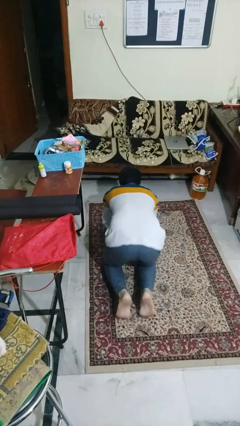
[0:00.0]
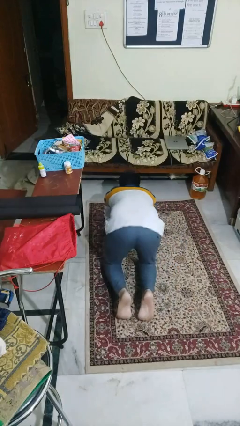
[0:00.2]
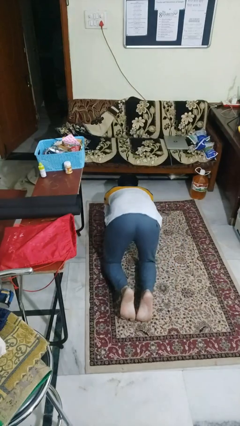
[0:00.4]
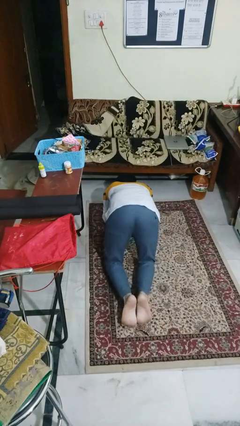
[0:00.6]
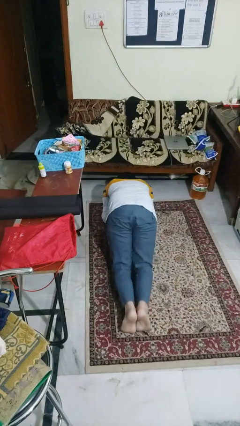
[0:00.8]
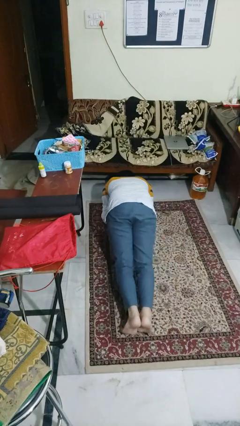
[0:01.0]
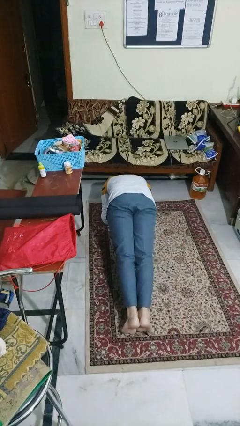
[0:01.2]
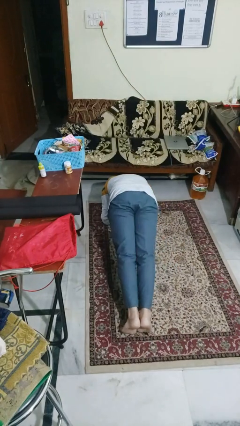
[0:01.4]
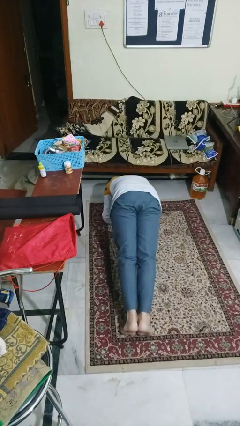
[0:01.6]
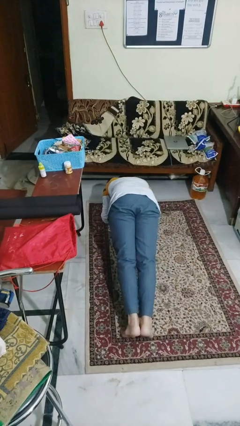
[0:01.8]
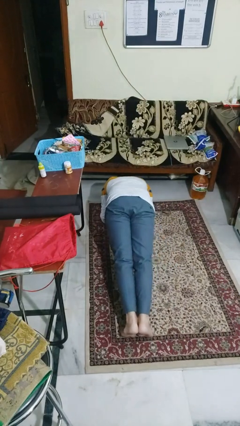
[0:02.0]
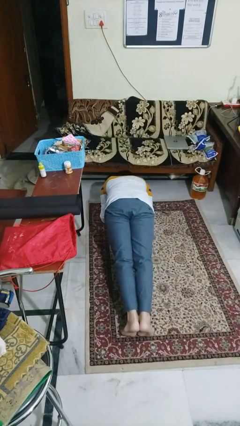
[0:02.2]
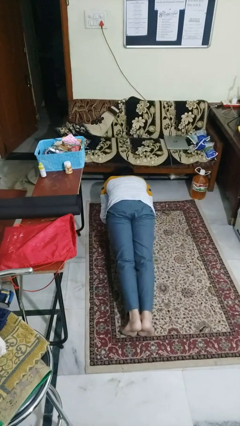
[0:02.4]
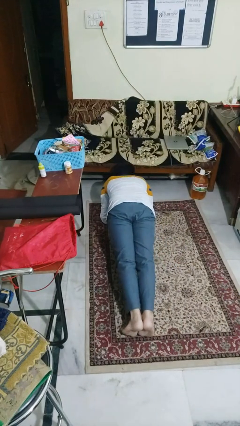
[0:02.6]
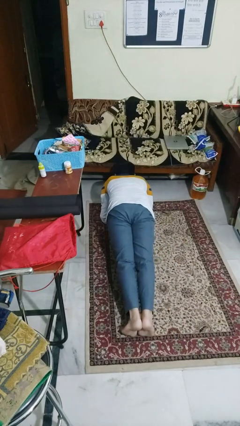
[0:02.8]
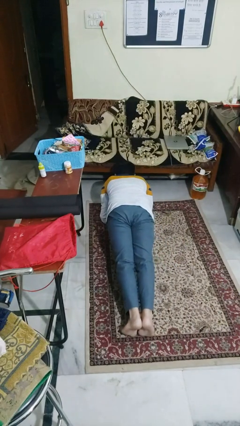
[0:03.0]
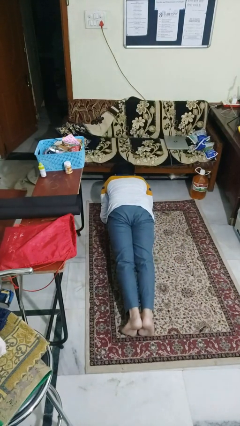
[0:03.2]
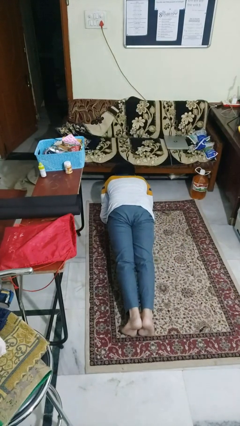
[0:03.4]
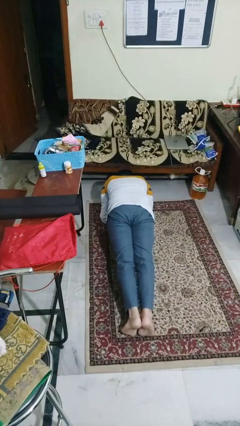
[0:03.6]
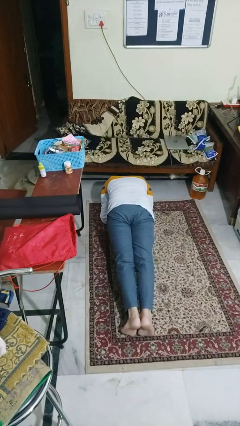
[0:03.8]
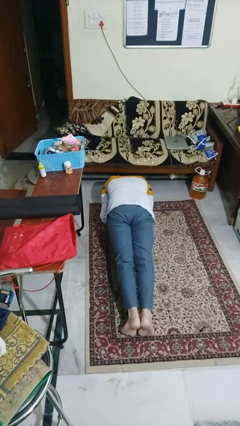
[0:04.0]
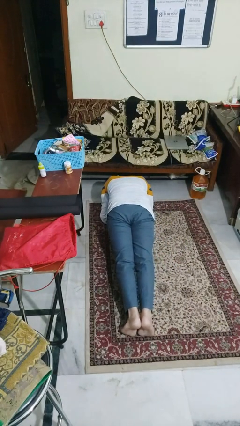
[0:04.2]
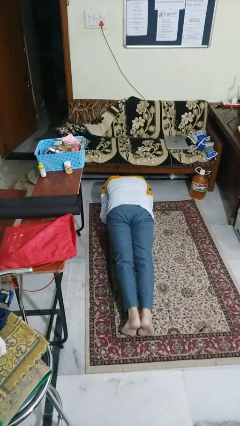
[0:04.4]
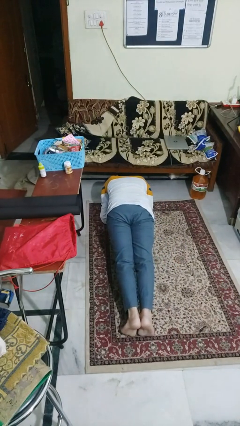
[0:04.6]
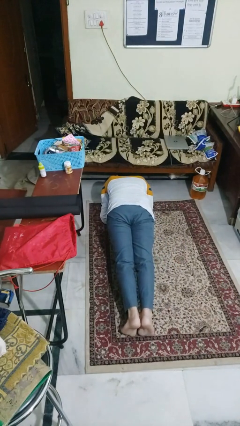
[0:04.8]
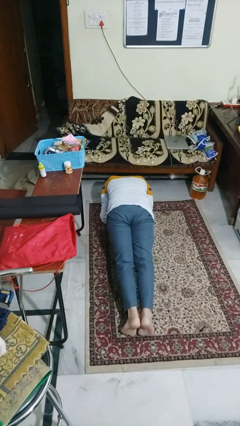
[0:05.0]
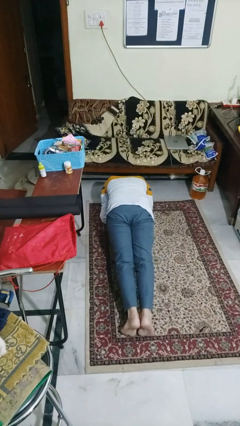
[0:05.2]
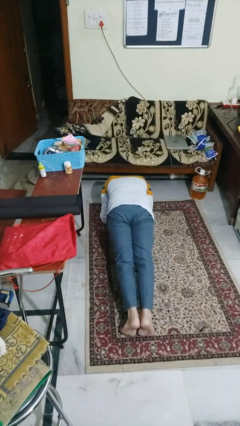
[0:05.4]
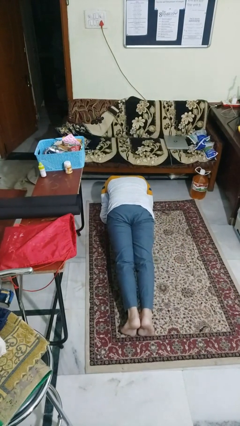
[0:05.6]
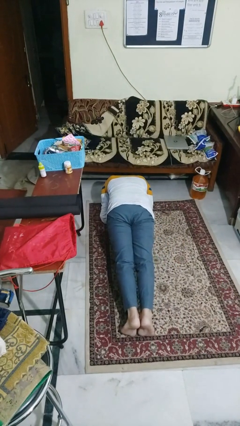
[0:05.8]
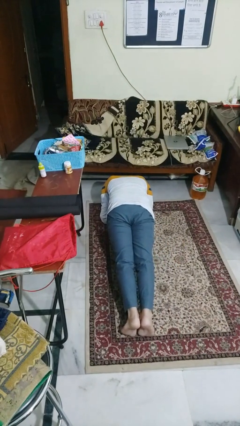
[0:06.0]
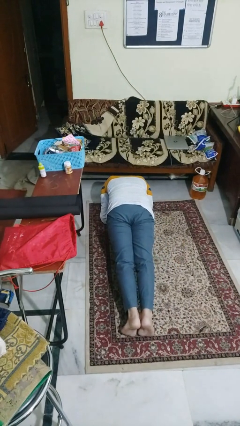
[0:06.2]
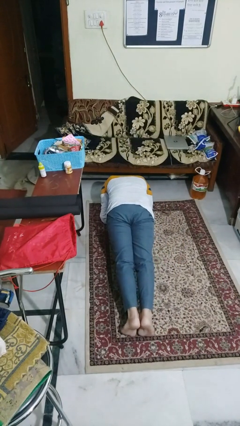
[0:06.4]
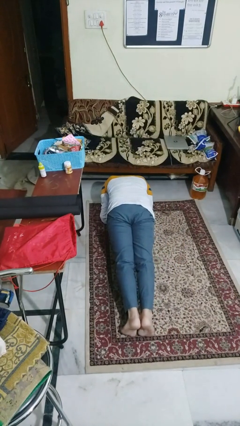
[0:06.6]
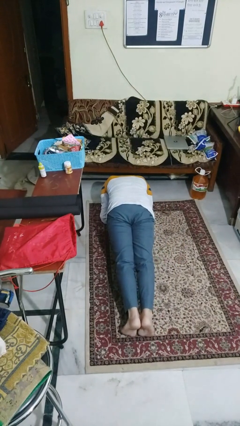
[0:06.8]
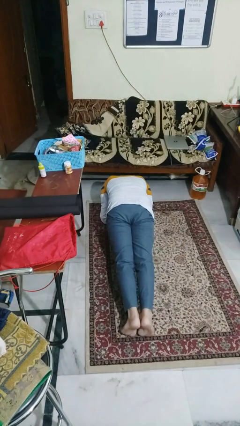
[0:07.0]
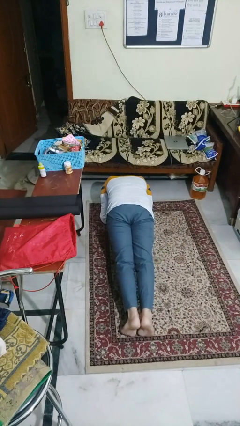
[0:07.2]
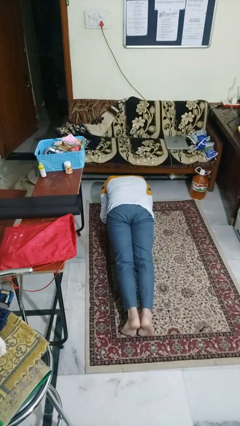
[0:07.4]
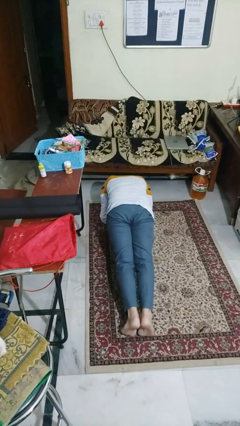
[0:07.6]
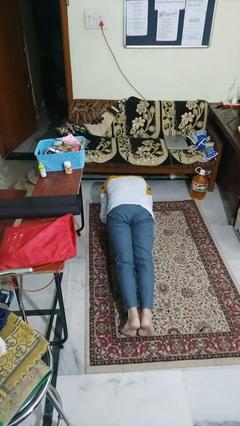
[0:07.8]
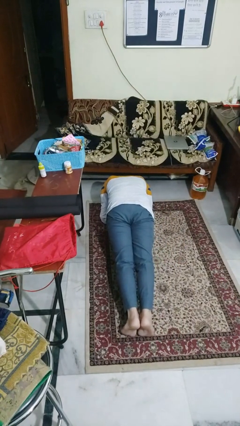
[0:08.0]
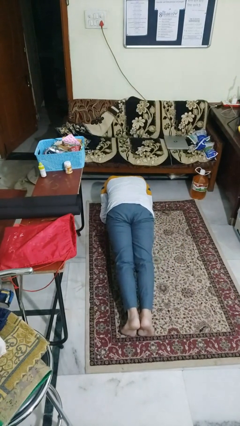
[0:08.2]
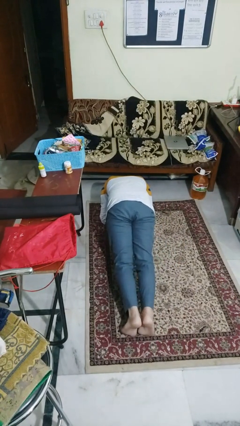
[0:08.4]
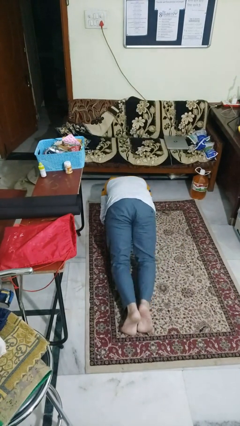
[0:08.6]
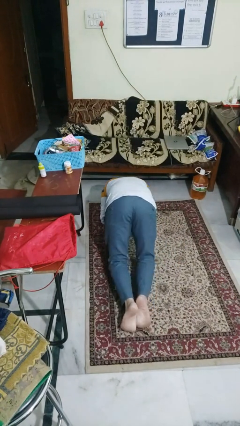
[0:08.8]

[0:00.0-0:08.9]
person exercises with plank

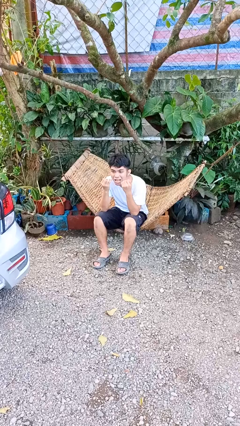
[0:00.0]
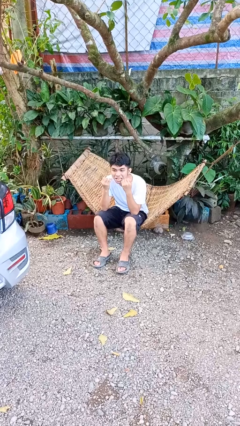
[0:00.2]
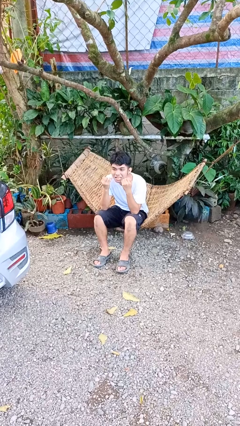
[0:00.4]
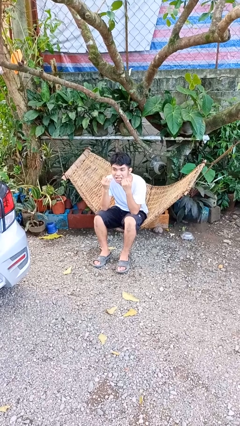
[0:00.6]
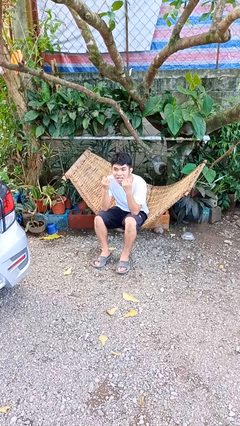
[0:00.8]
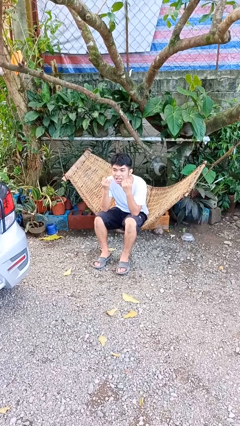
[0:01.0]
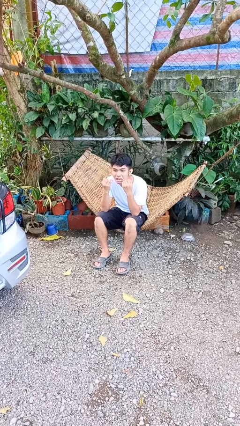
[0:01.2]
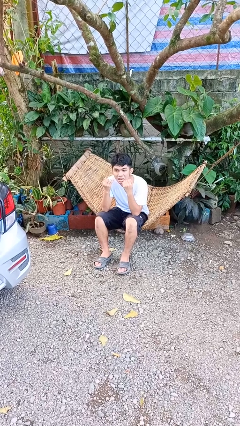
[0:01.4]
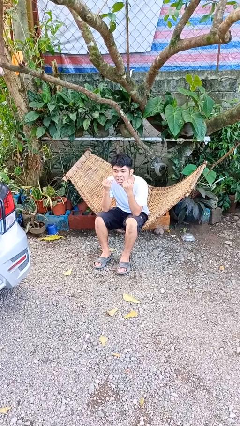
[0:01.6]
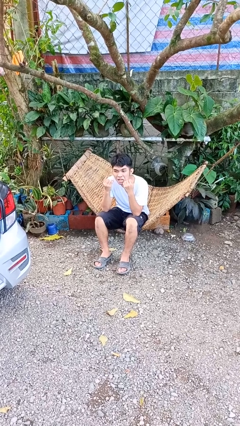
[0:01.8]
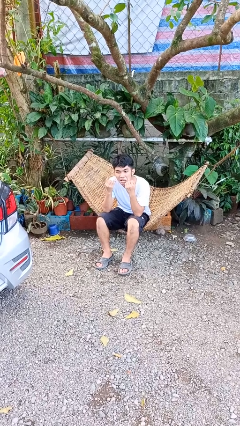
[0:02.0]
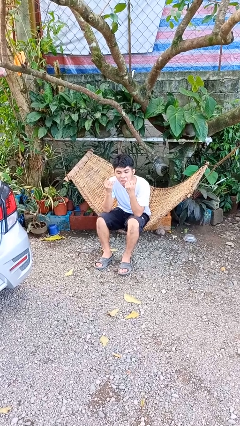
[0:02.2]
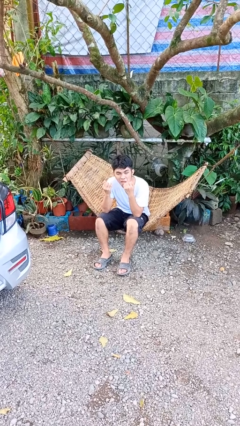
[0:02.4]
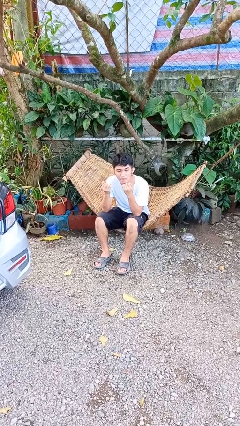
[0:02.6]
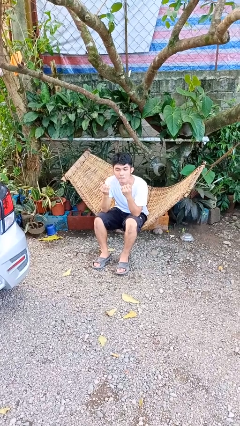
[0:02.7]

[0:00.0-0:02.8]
person flosses

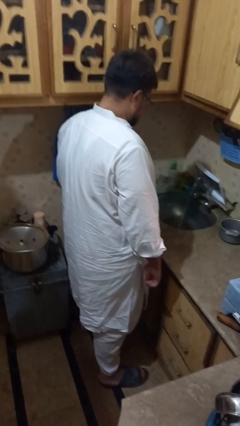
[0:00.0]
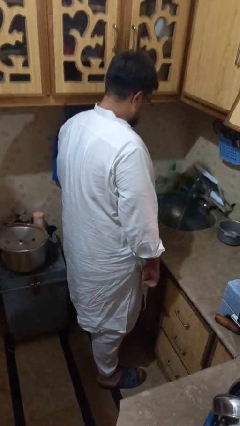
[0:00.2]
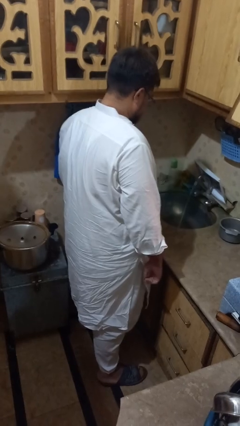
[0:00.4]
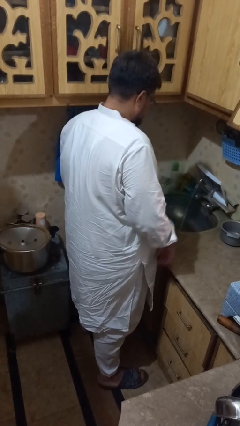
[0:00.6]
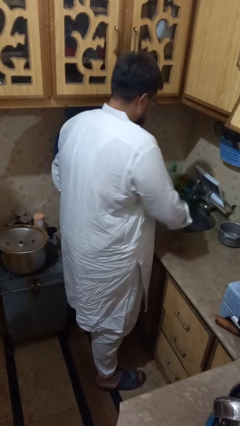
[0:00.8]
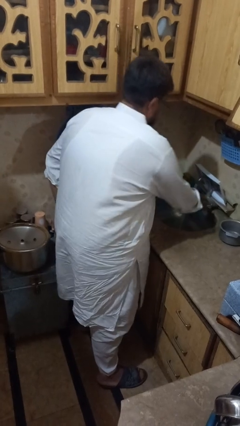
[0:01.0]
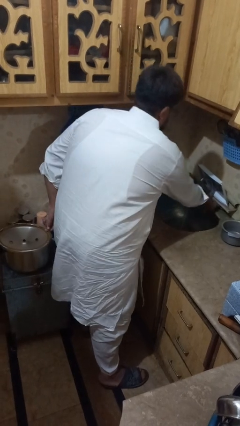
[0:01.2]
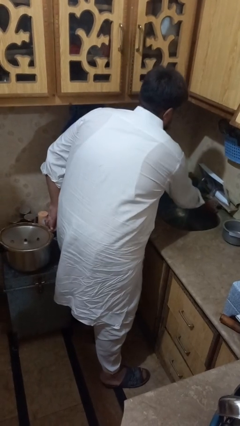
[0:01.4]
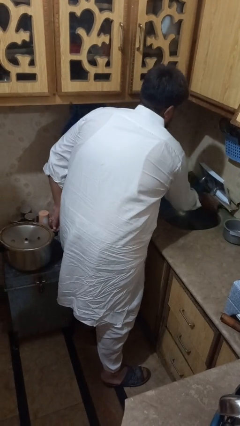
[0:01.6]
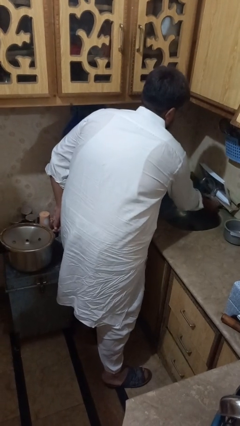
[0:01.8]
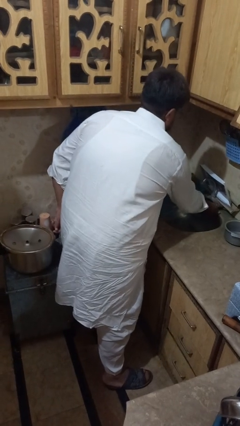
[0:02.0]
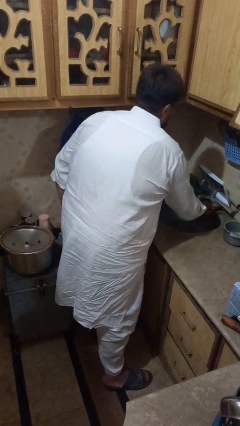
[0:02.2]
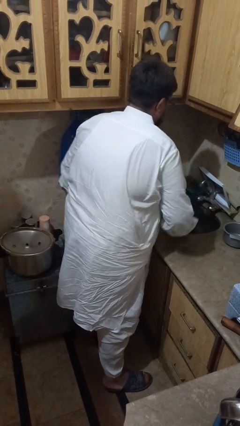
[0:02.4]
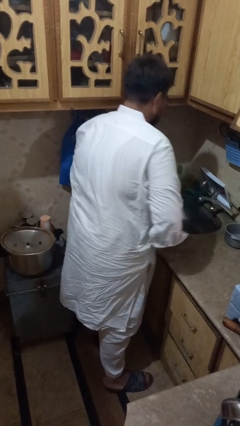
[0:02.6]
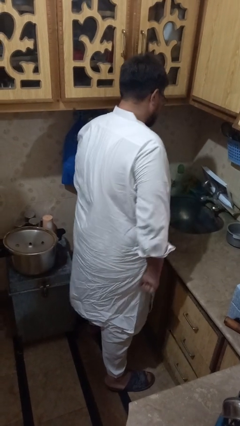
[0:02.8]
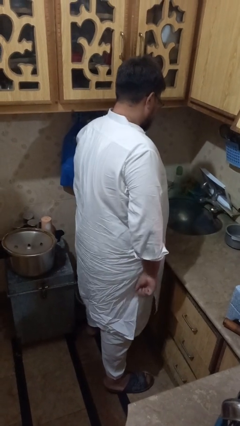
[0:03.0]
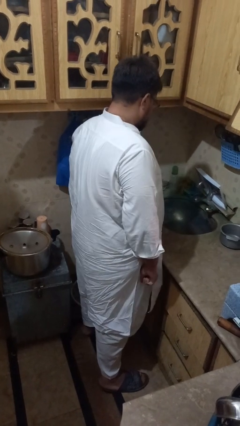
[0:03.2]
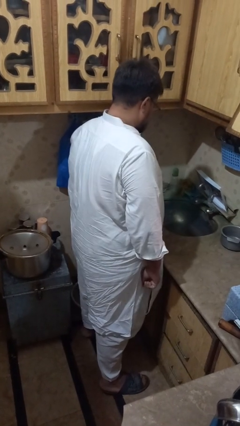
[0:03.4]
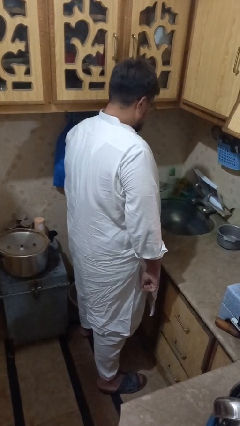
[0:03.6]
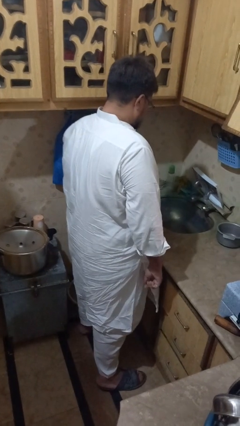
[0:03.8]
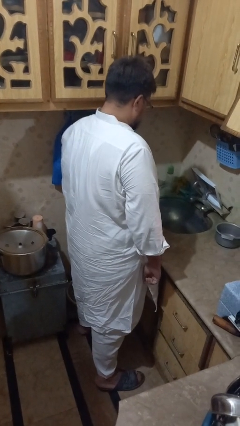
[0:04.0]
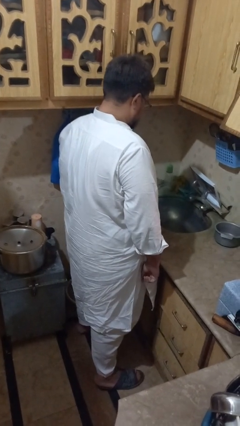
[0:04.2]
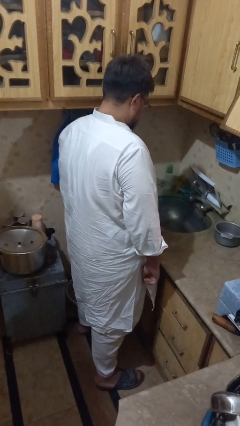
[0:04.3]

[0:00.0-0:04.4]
person turns off faucet

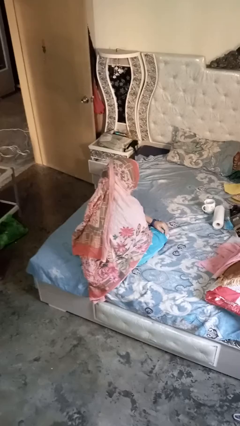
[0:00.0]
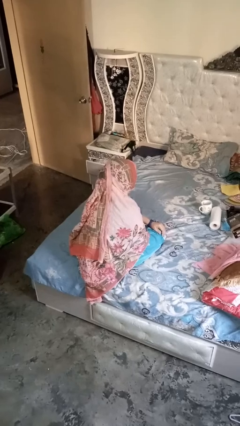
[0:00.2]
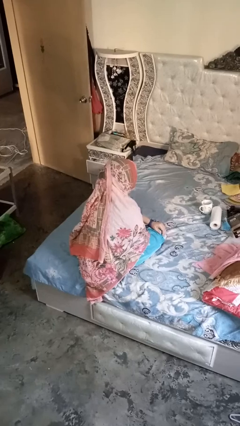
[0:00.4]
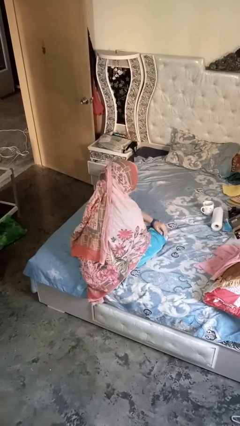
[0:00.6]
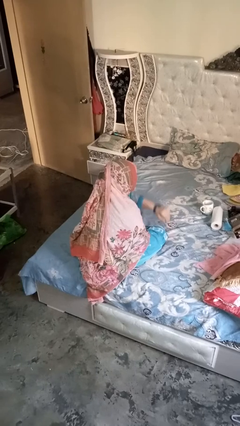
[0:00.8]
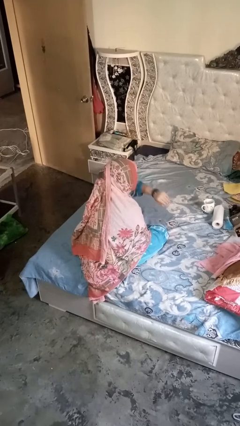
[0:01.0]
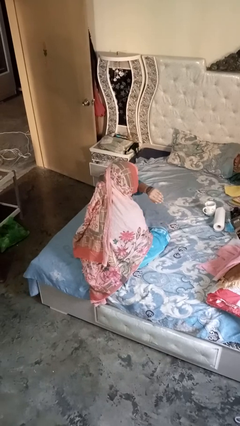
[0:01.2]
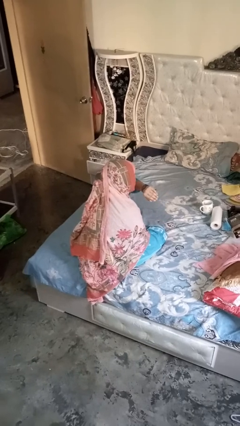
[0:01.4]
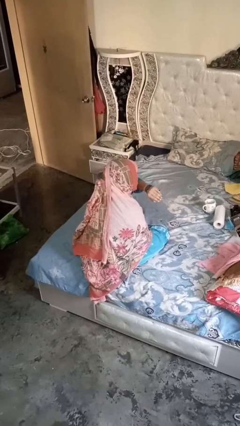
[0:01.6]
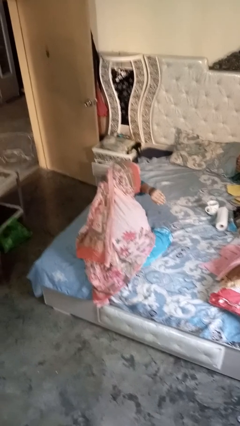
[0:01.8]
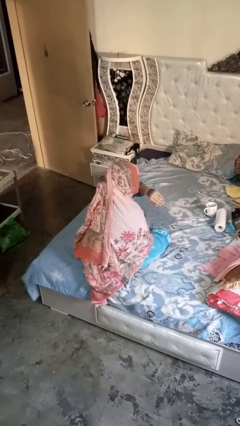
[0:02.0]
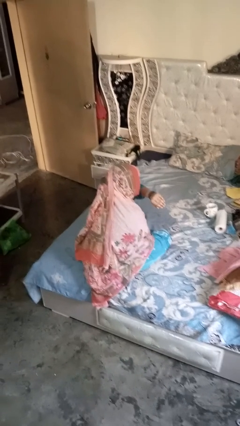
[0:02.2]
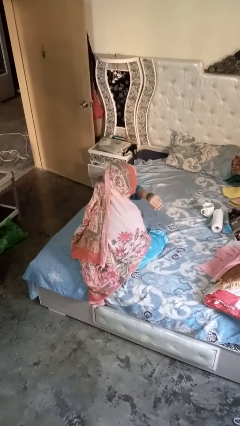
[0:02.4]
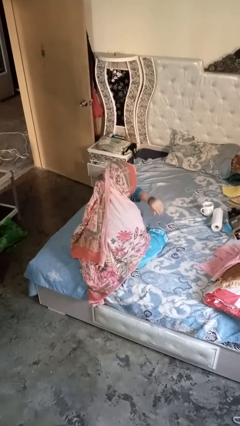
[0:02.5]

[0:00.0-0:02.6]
person gestures watch closely
